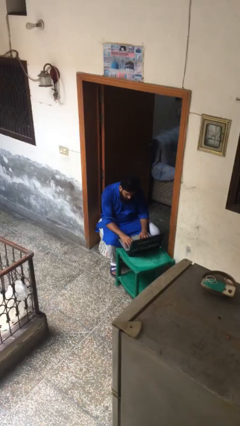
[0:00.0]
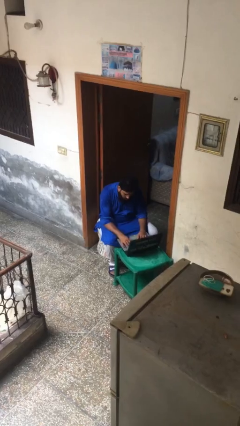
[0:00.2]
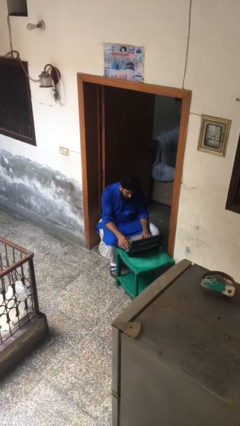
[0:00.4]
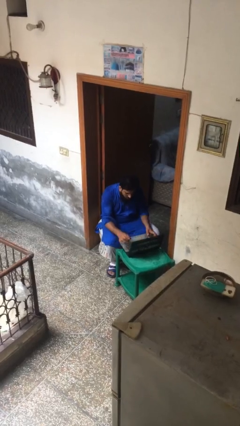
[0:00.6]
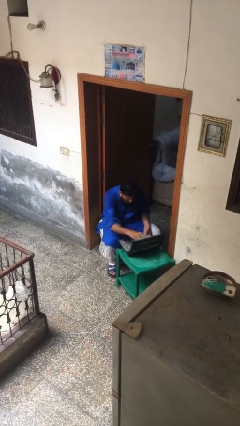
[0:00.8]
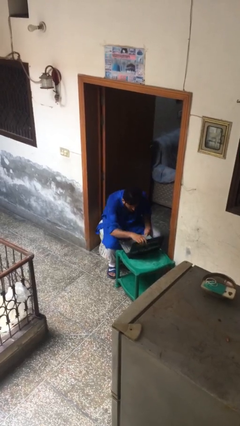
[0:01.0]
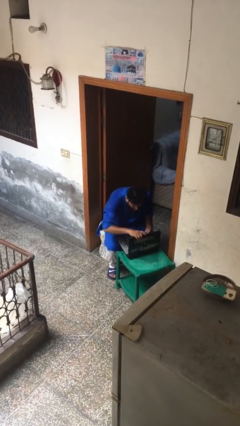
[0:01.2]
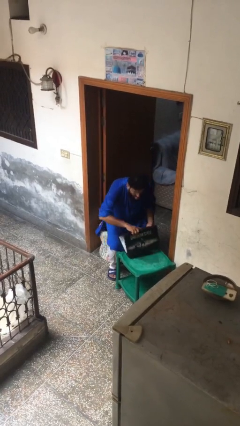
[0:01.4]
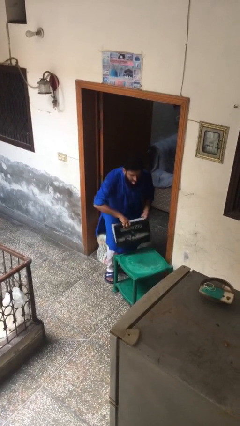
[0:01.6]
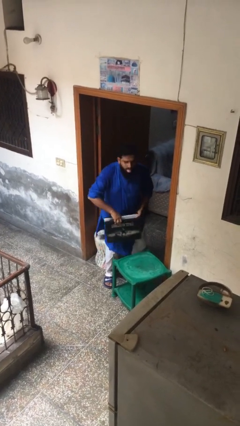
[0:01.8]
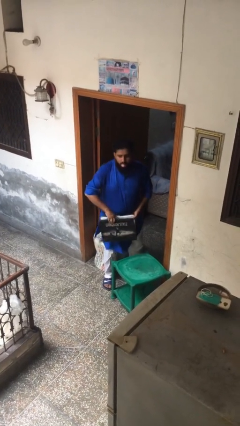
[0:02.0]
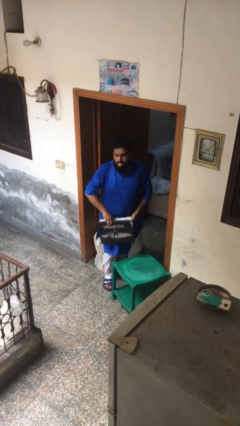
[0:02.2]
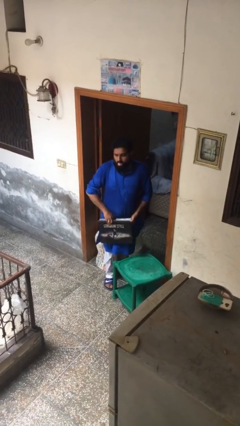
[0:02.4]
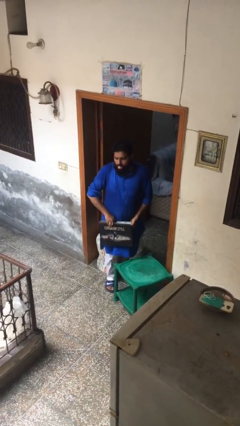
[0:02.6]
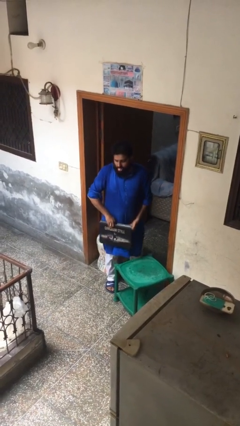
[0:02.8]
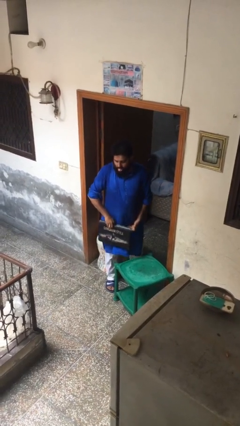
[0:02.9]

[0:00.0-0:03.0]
person stands up

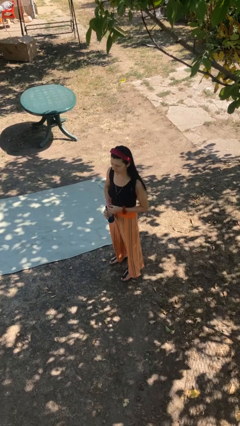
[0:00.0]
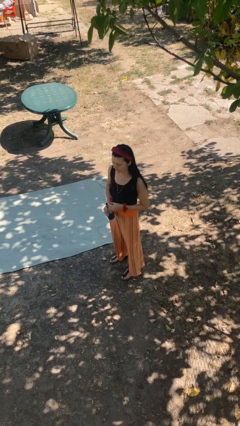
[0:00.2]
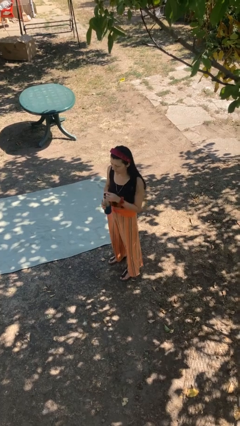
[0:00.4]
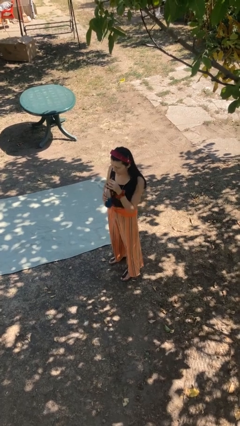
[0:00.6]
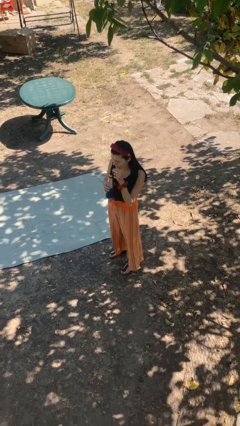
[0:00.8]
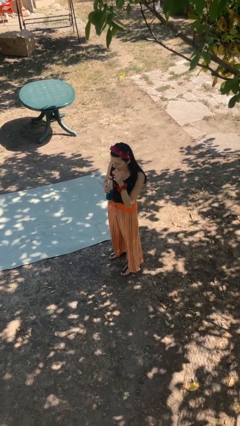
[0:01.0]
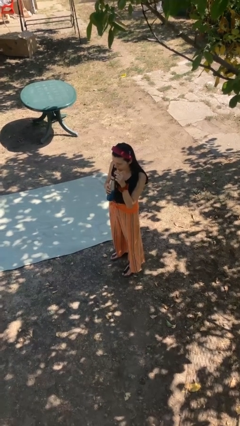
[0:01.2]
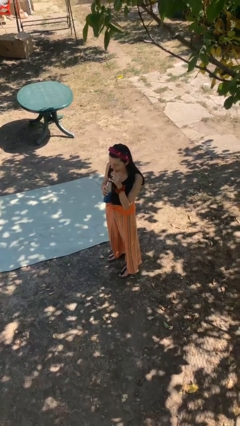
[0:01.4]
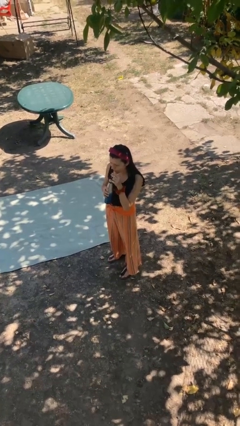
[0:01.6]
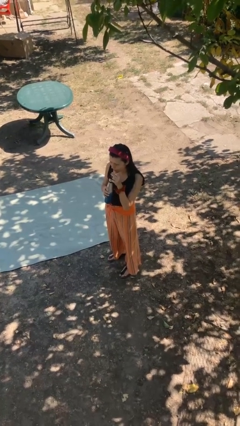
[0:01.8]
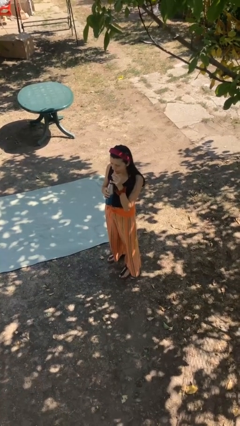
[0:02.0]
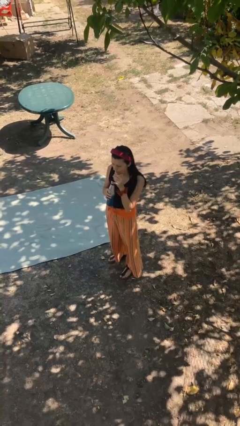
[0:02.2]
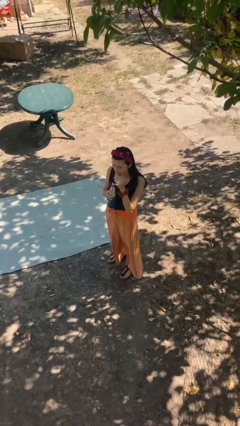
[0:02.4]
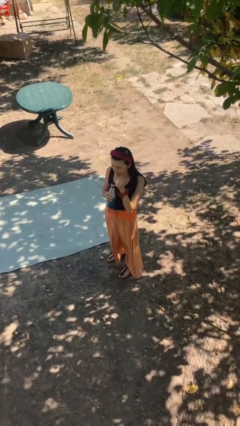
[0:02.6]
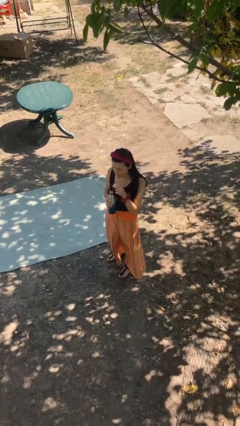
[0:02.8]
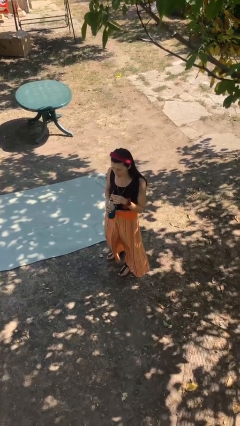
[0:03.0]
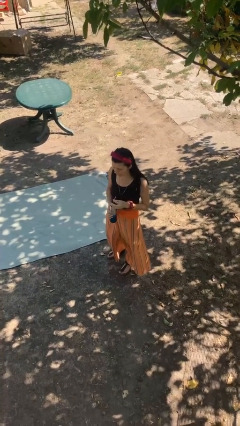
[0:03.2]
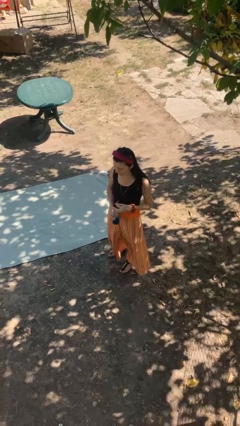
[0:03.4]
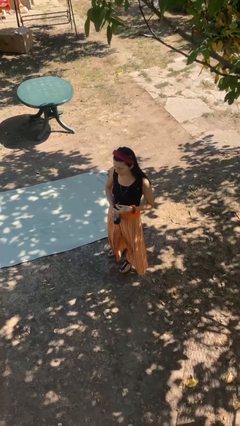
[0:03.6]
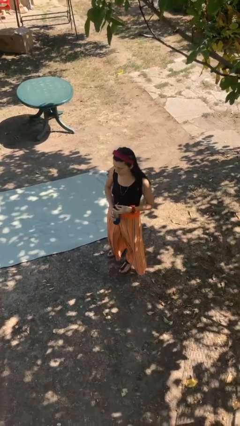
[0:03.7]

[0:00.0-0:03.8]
person drinks from bottle

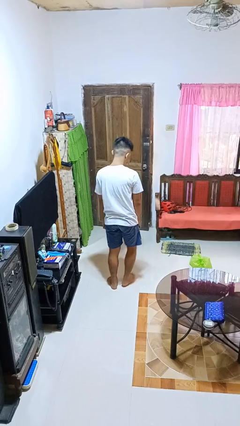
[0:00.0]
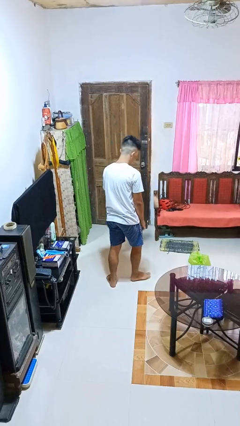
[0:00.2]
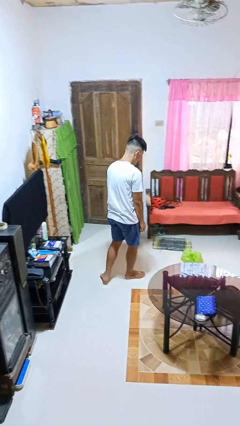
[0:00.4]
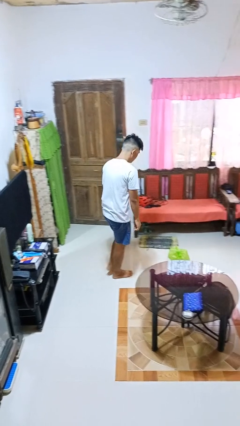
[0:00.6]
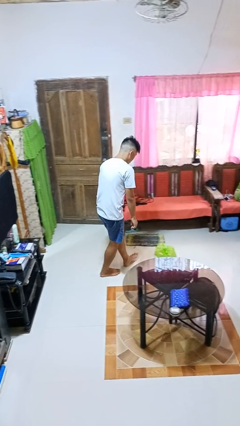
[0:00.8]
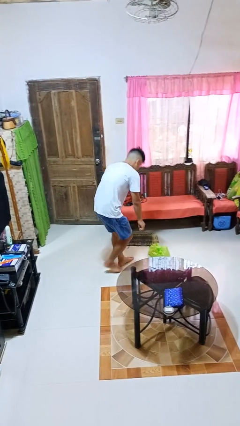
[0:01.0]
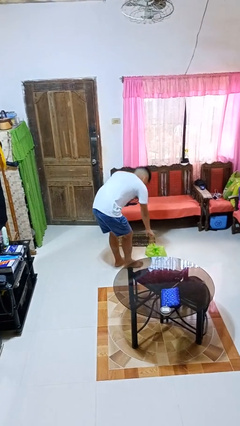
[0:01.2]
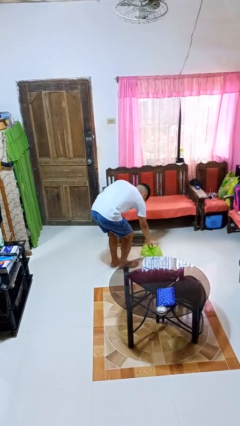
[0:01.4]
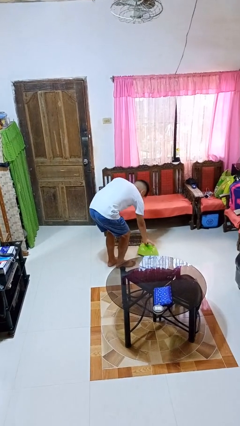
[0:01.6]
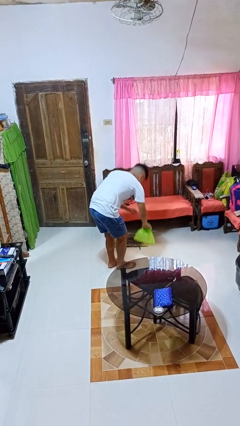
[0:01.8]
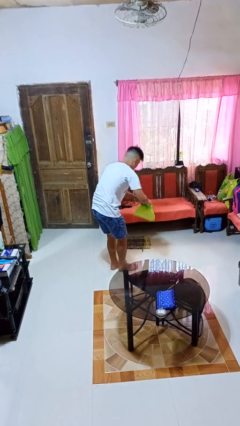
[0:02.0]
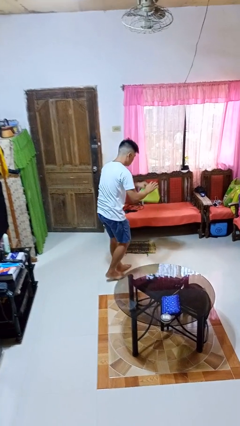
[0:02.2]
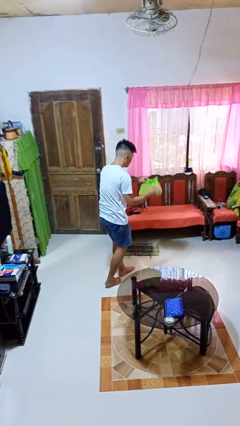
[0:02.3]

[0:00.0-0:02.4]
person picks up object from floor

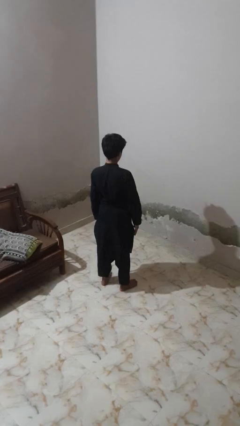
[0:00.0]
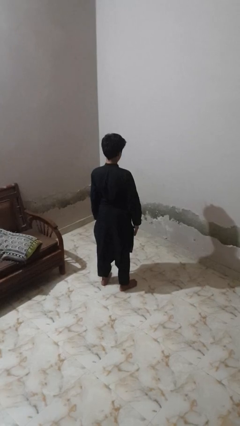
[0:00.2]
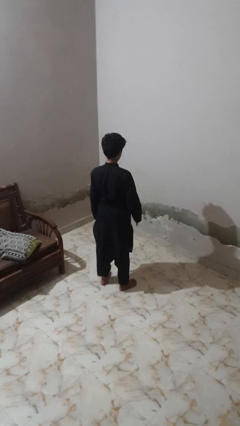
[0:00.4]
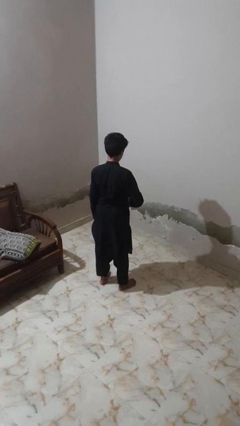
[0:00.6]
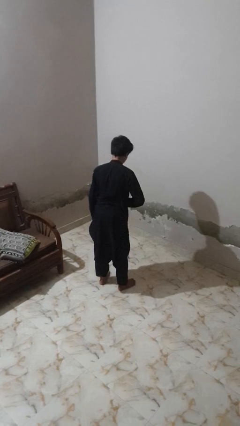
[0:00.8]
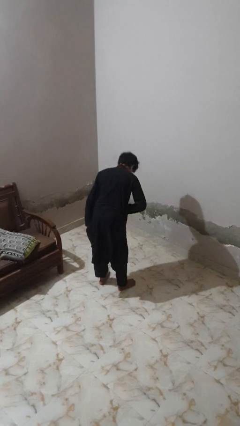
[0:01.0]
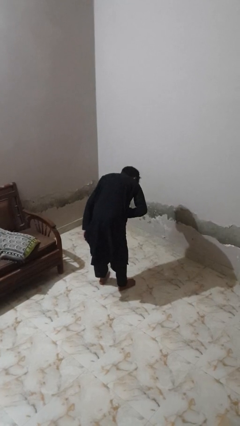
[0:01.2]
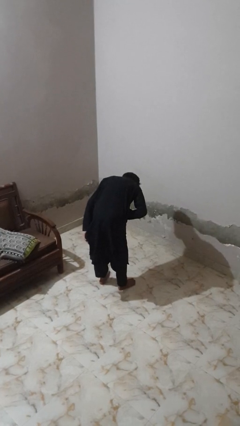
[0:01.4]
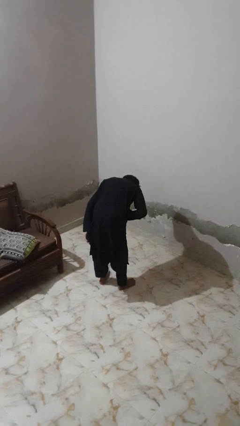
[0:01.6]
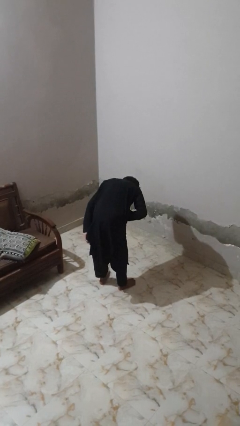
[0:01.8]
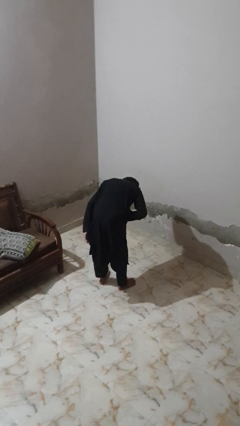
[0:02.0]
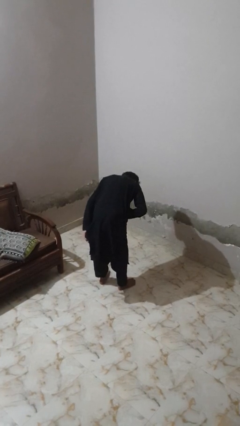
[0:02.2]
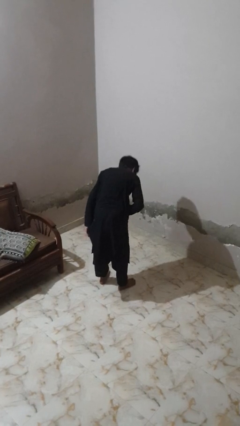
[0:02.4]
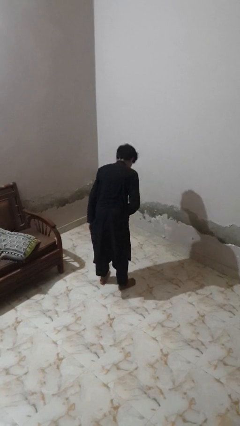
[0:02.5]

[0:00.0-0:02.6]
person bows

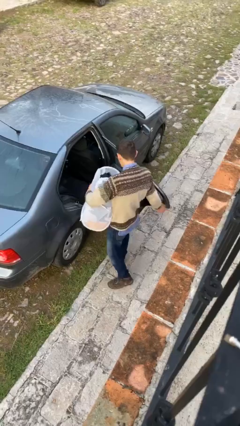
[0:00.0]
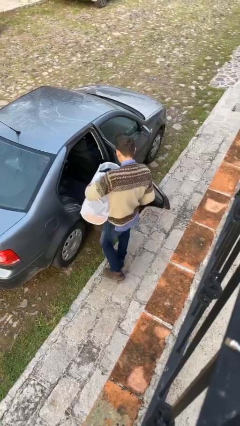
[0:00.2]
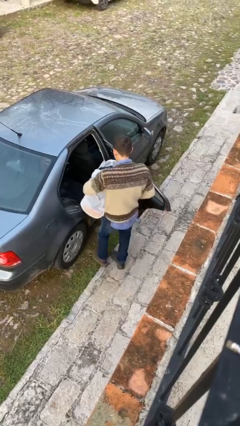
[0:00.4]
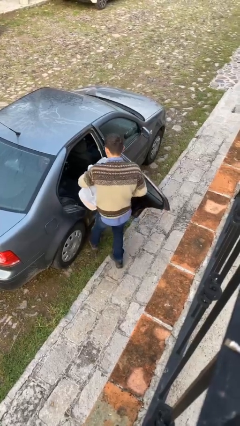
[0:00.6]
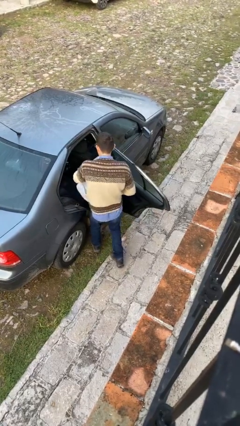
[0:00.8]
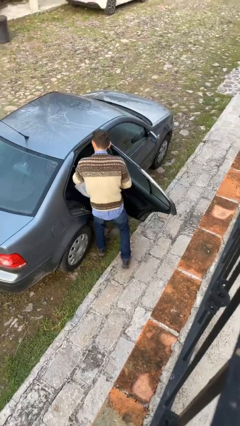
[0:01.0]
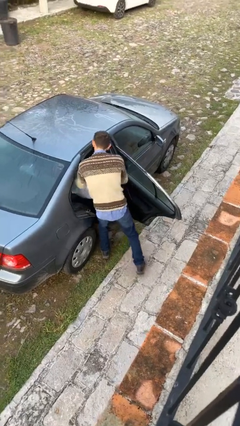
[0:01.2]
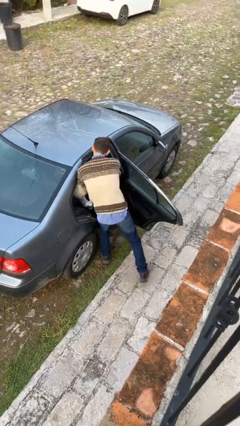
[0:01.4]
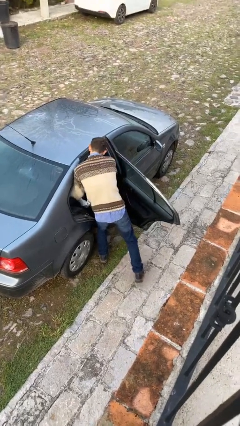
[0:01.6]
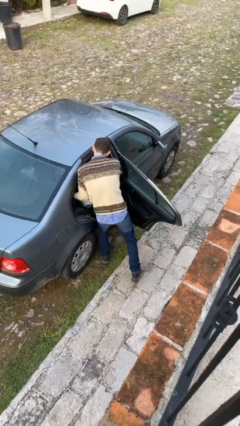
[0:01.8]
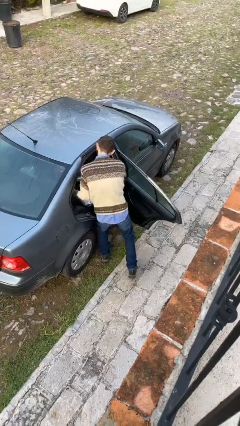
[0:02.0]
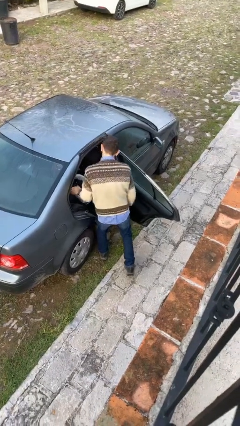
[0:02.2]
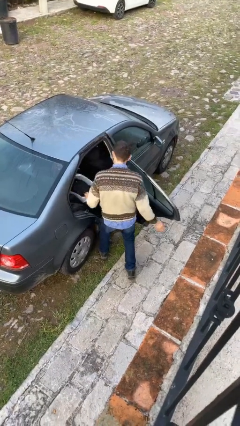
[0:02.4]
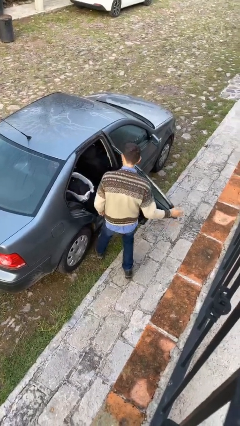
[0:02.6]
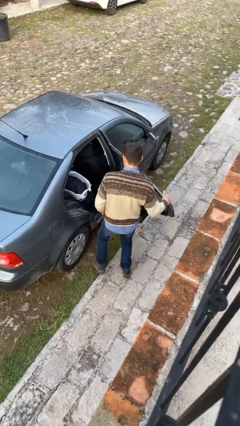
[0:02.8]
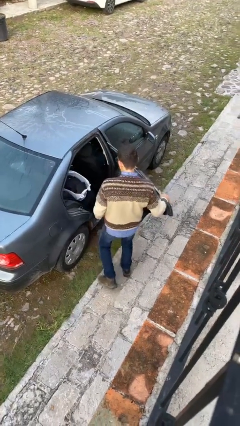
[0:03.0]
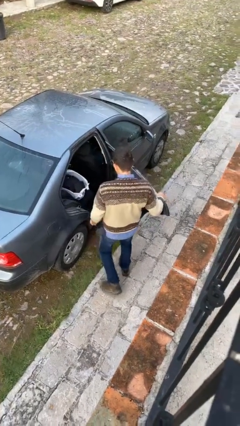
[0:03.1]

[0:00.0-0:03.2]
person loads car

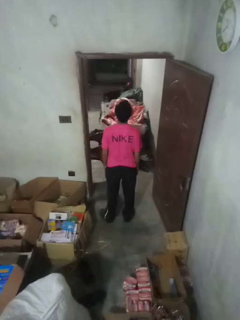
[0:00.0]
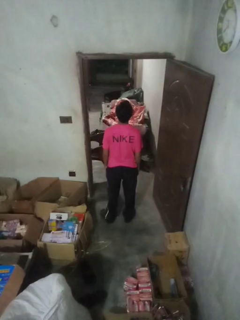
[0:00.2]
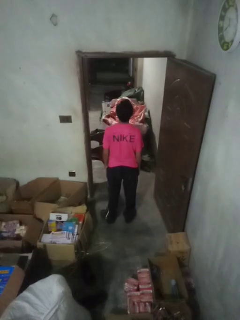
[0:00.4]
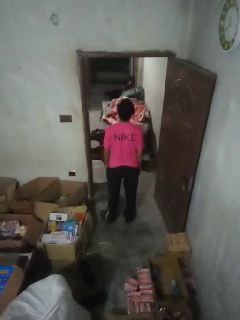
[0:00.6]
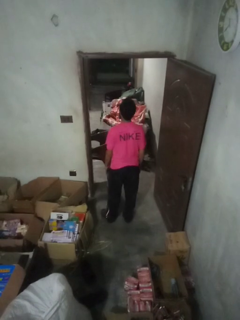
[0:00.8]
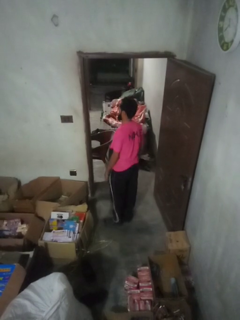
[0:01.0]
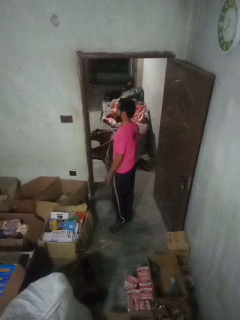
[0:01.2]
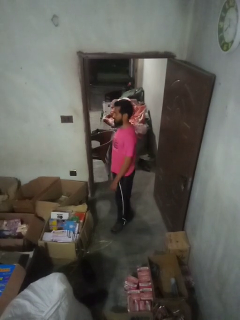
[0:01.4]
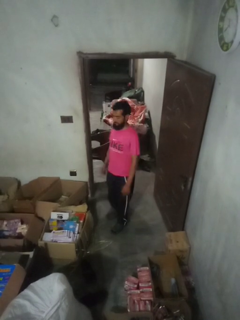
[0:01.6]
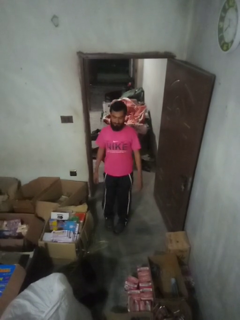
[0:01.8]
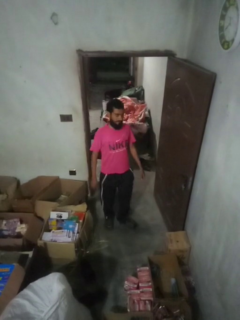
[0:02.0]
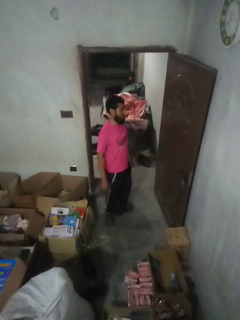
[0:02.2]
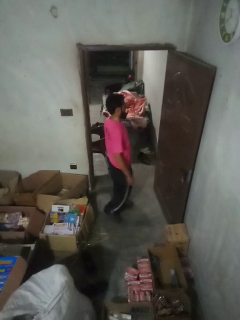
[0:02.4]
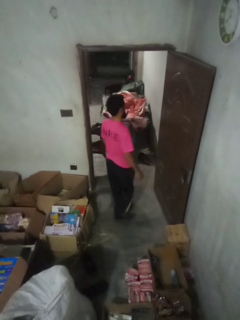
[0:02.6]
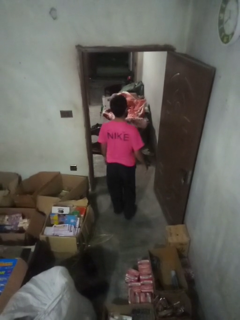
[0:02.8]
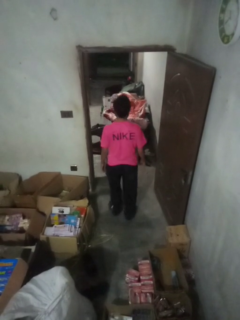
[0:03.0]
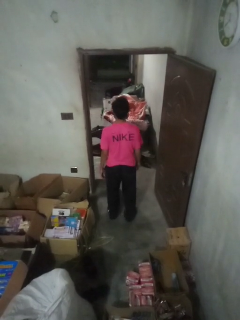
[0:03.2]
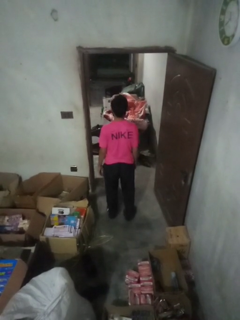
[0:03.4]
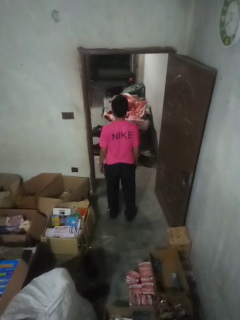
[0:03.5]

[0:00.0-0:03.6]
person twirls

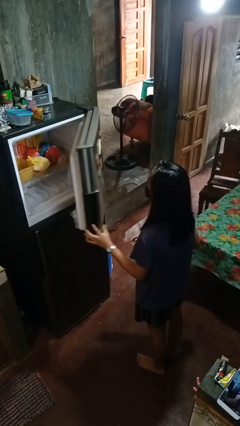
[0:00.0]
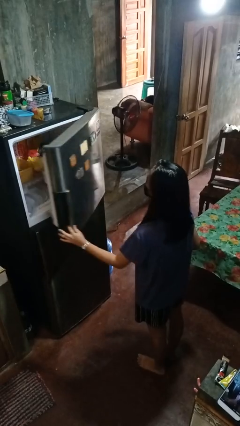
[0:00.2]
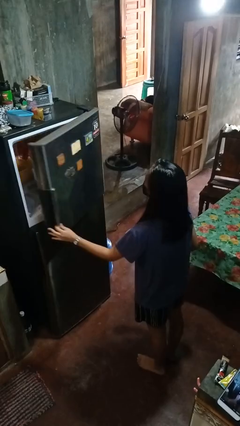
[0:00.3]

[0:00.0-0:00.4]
person closes refrigerator
